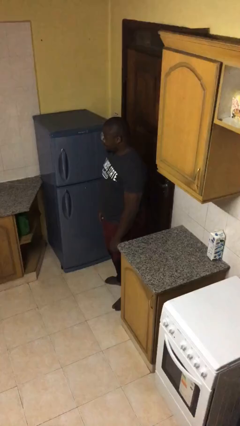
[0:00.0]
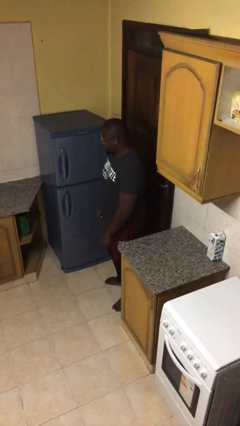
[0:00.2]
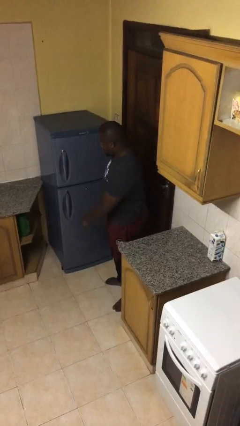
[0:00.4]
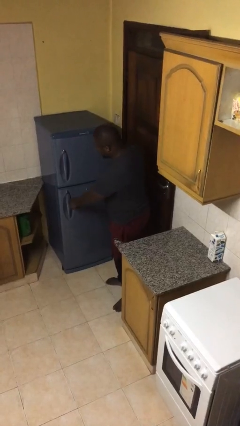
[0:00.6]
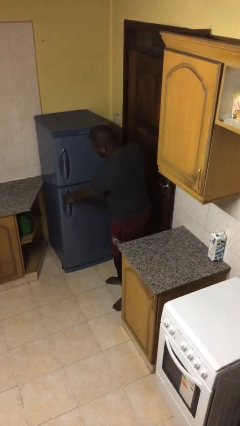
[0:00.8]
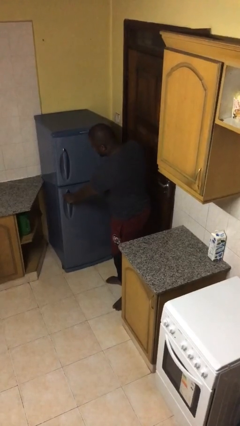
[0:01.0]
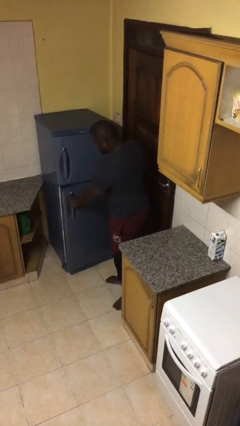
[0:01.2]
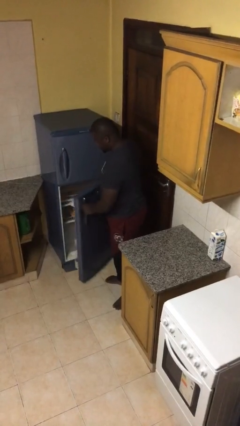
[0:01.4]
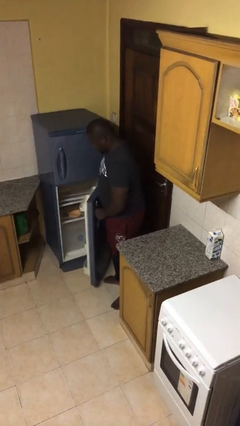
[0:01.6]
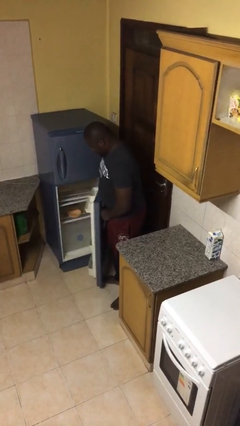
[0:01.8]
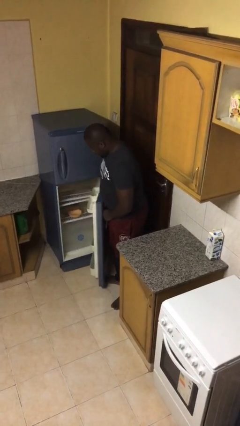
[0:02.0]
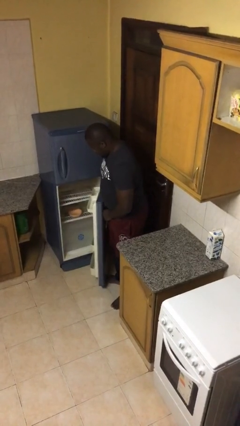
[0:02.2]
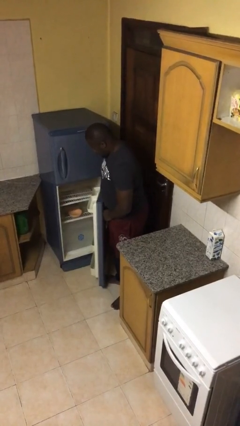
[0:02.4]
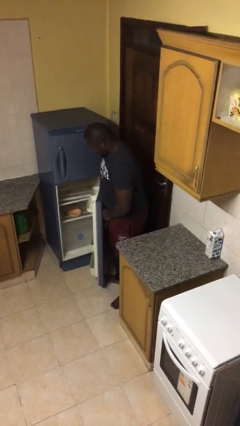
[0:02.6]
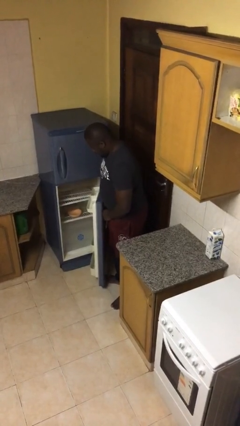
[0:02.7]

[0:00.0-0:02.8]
person opens refrigerator

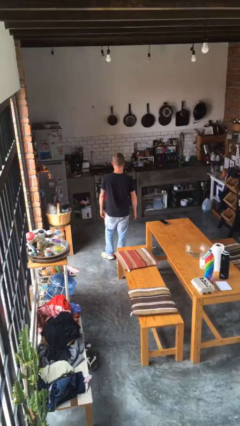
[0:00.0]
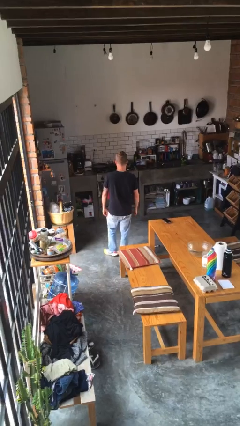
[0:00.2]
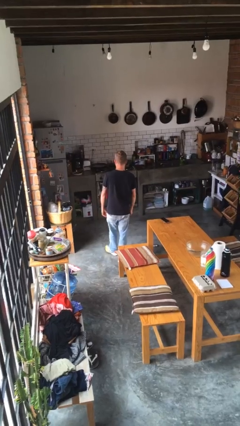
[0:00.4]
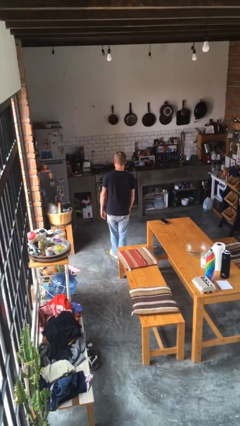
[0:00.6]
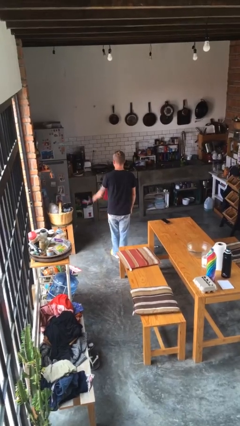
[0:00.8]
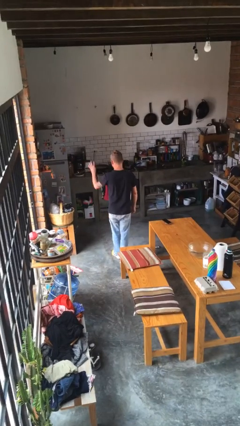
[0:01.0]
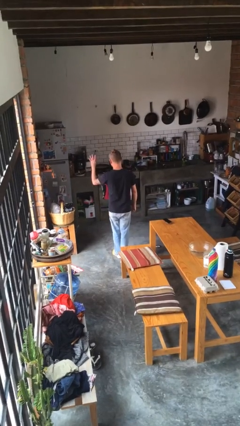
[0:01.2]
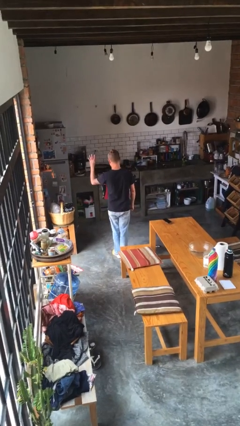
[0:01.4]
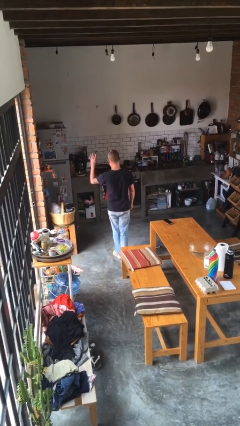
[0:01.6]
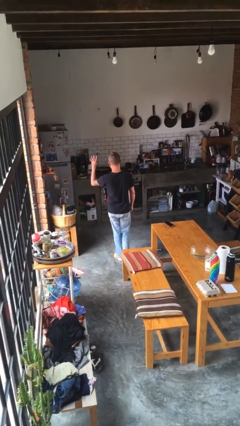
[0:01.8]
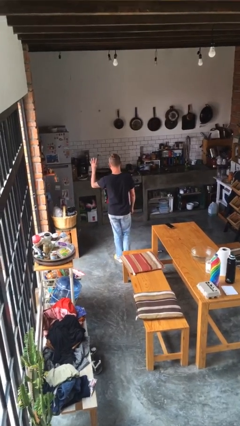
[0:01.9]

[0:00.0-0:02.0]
person gestures number four

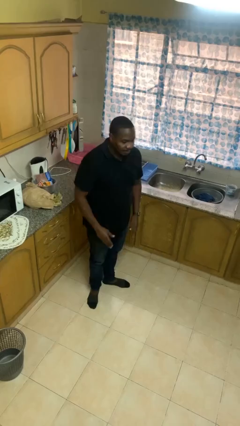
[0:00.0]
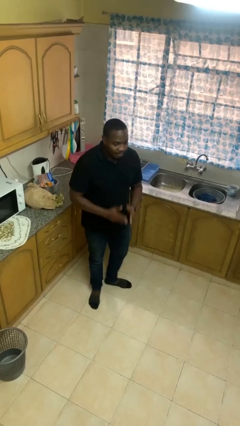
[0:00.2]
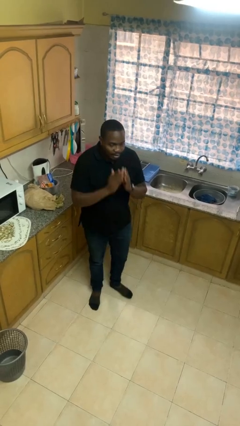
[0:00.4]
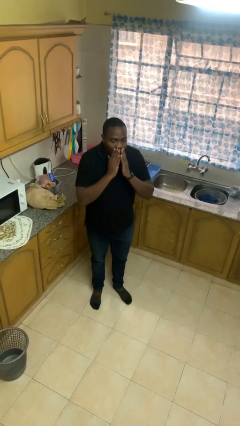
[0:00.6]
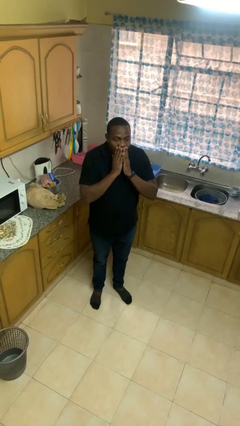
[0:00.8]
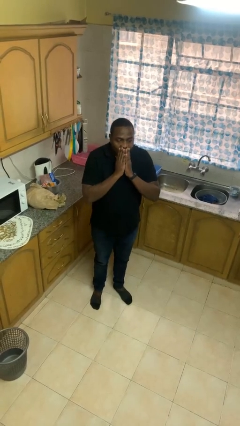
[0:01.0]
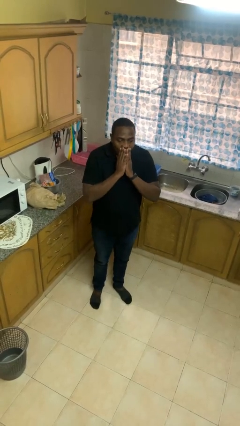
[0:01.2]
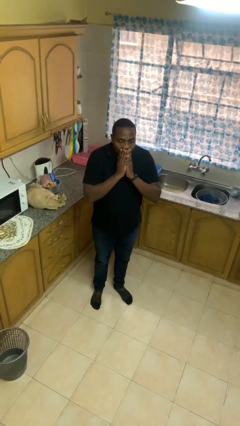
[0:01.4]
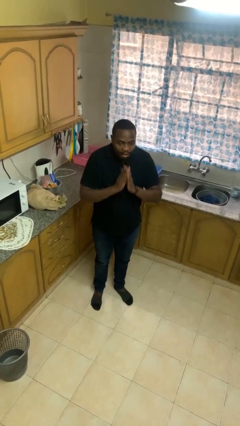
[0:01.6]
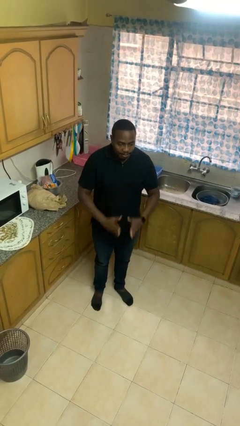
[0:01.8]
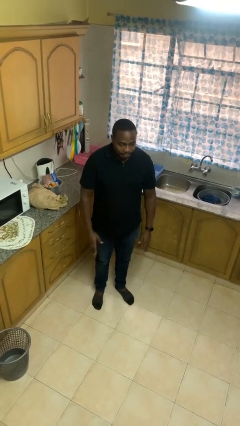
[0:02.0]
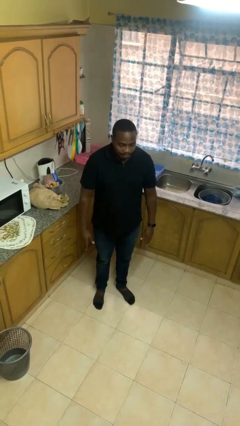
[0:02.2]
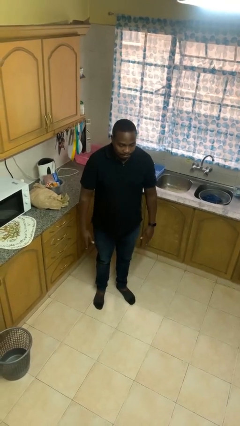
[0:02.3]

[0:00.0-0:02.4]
person yawns

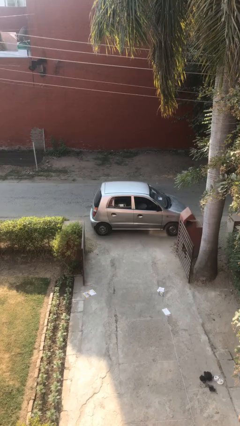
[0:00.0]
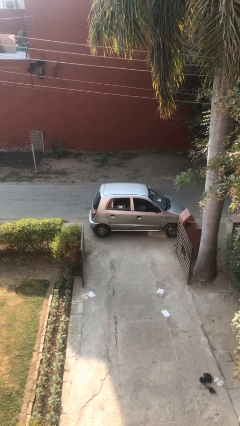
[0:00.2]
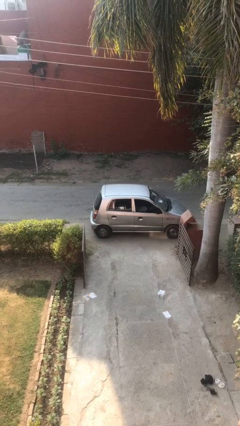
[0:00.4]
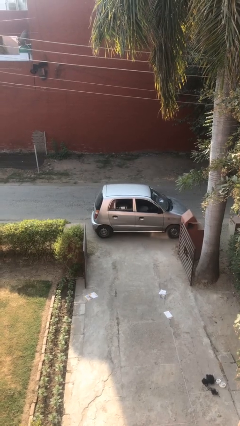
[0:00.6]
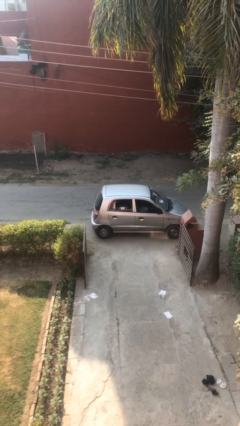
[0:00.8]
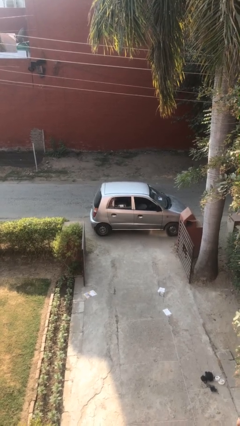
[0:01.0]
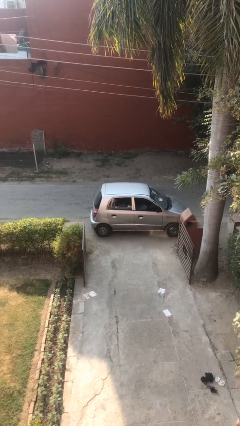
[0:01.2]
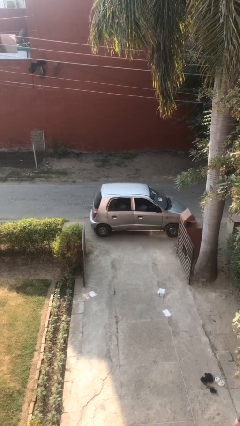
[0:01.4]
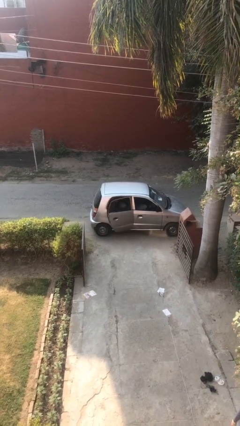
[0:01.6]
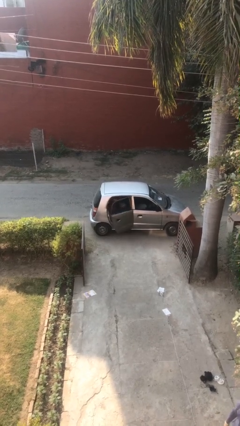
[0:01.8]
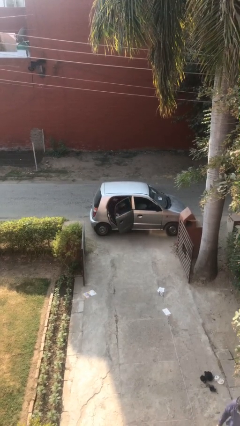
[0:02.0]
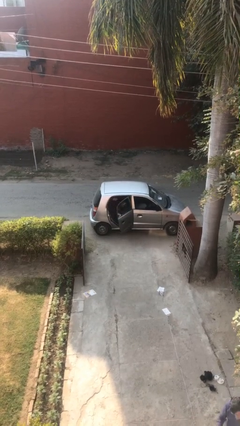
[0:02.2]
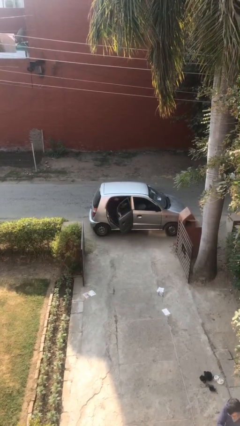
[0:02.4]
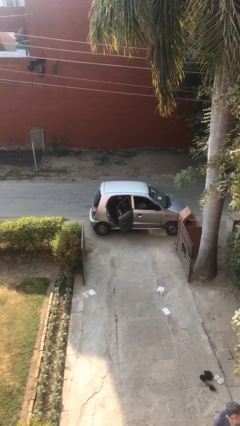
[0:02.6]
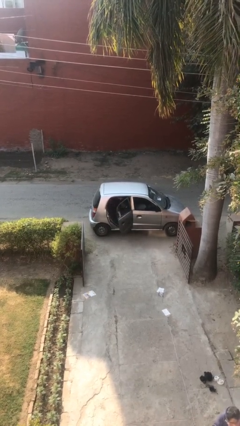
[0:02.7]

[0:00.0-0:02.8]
person opens car door

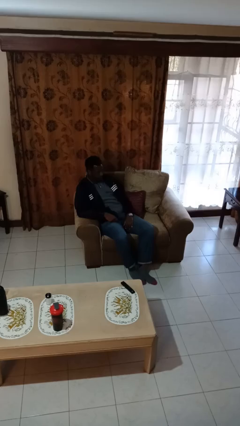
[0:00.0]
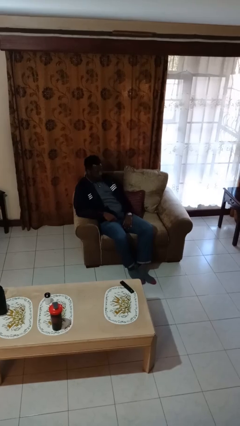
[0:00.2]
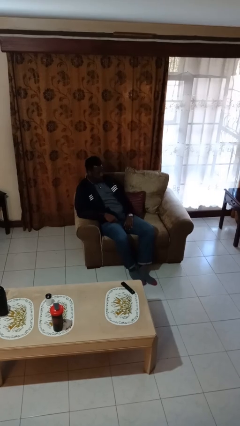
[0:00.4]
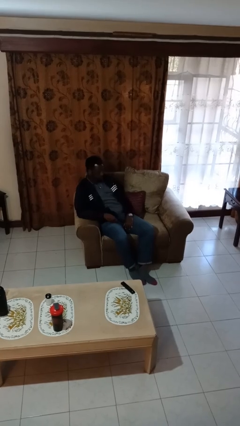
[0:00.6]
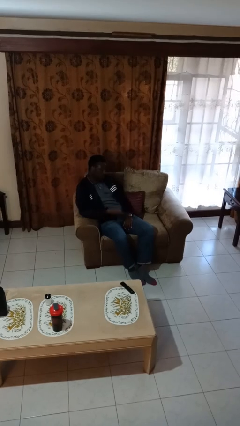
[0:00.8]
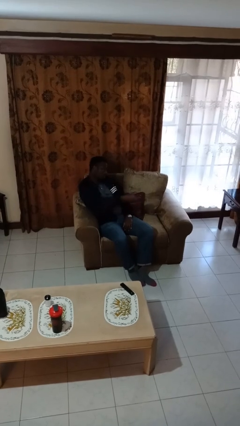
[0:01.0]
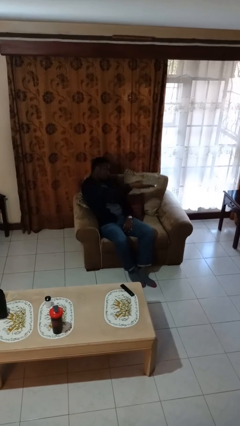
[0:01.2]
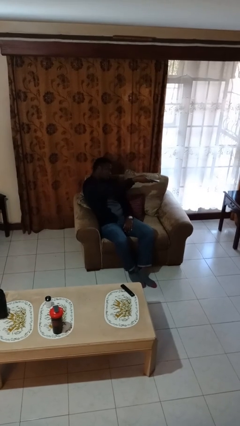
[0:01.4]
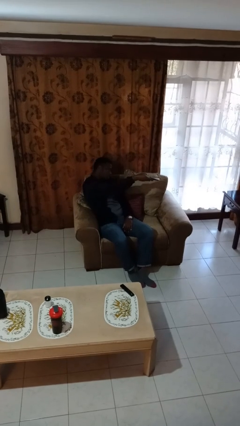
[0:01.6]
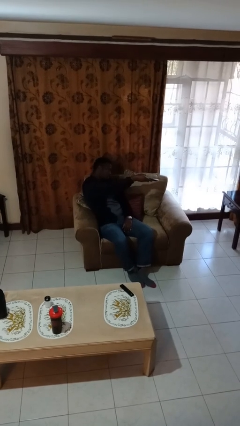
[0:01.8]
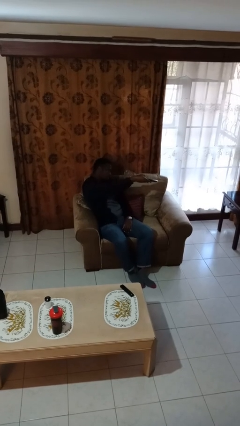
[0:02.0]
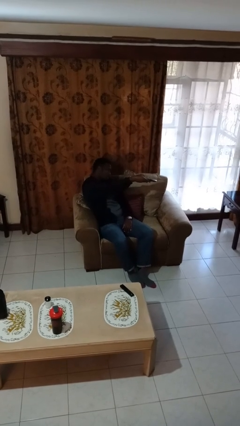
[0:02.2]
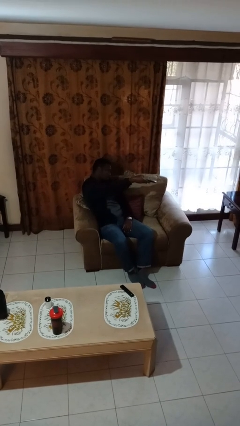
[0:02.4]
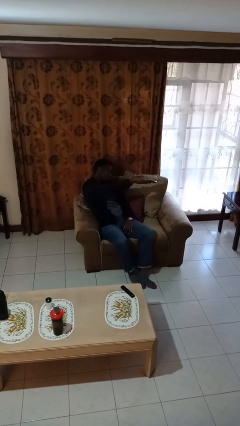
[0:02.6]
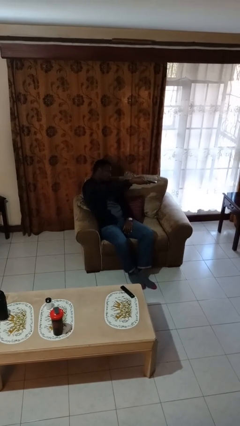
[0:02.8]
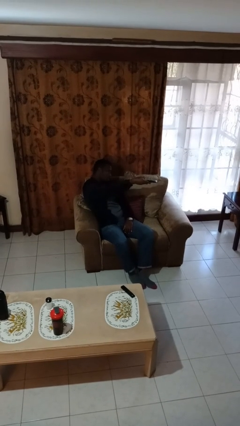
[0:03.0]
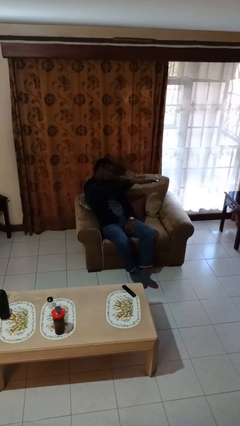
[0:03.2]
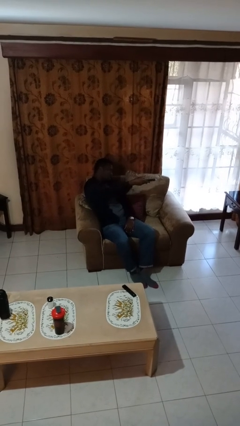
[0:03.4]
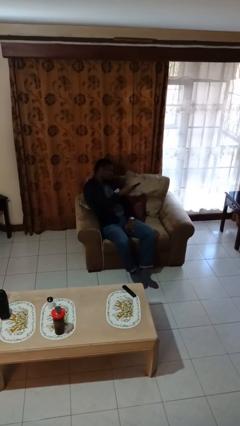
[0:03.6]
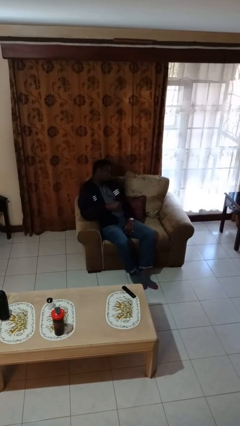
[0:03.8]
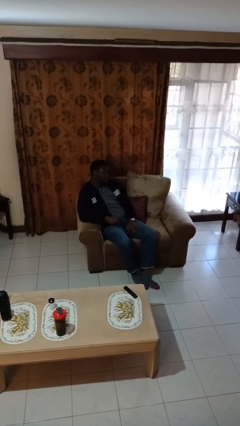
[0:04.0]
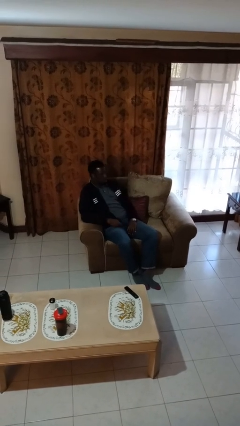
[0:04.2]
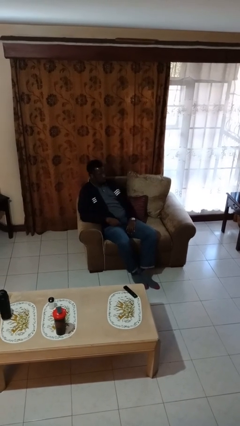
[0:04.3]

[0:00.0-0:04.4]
person uses television remote

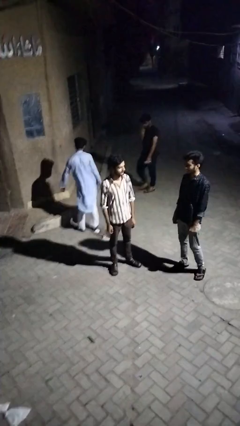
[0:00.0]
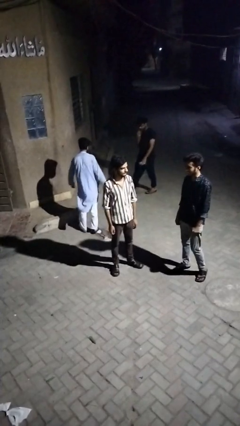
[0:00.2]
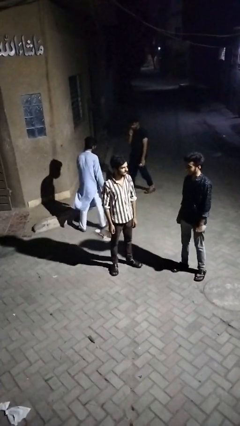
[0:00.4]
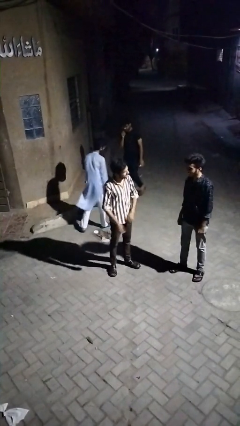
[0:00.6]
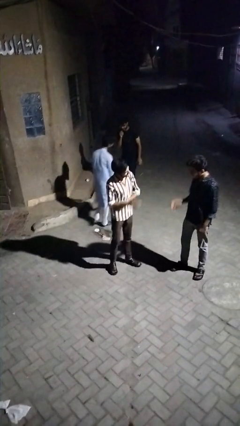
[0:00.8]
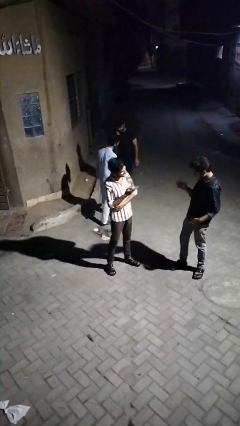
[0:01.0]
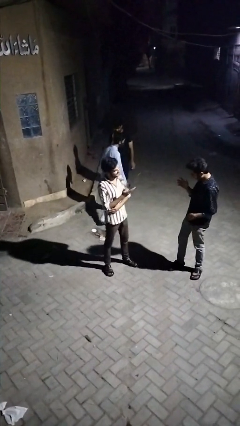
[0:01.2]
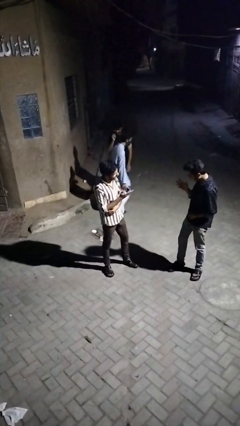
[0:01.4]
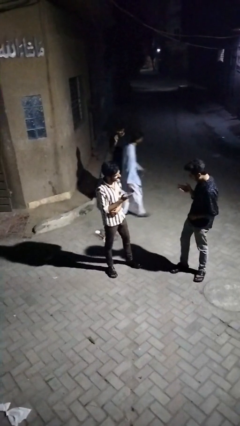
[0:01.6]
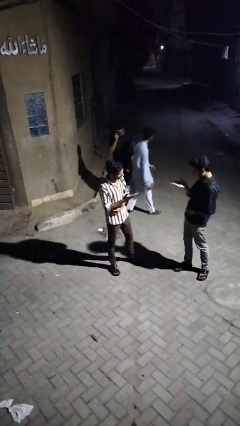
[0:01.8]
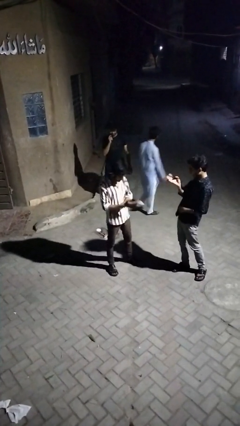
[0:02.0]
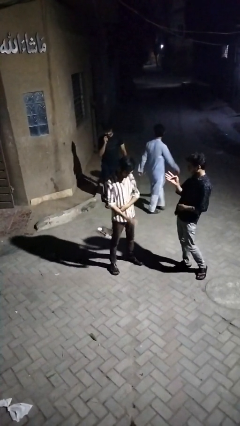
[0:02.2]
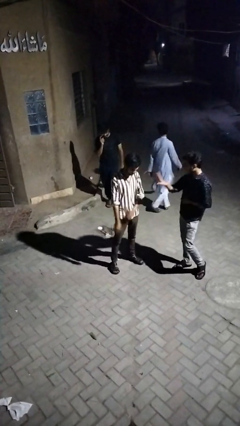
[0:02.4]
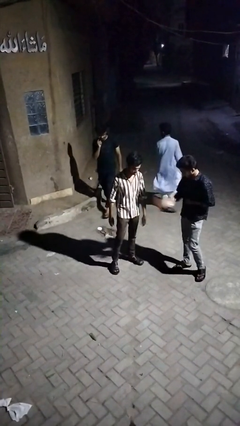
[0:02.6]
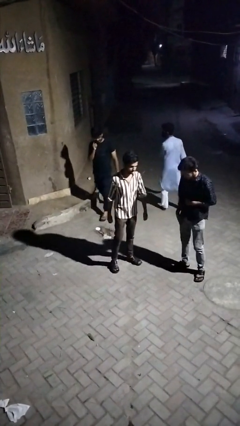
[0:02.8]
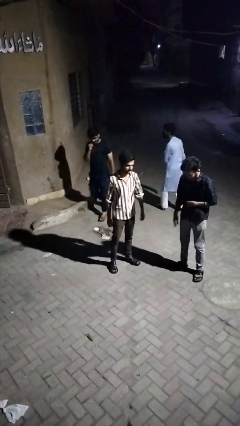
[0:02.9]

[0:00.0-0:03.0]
person laughs with person
